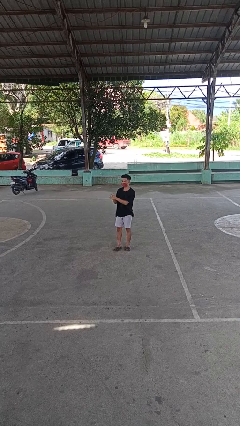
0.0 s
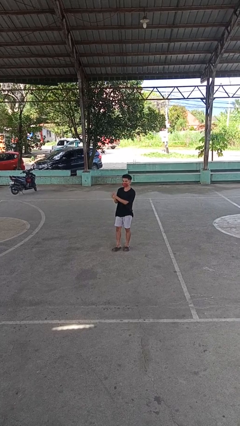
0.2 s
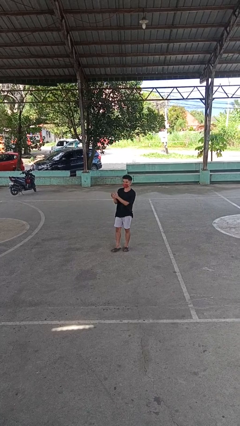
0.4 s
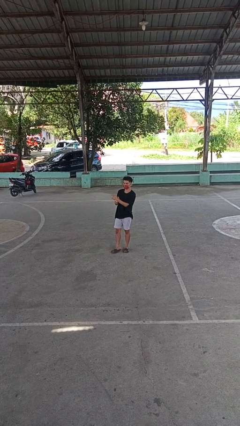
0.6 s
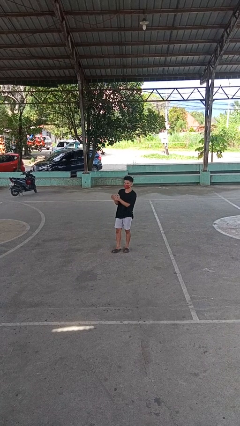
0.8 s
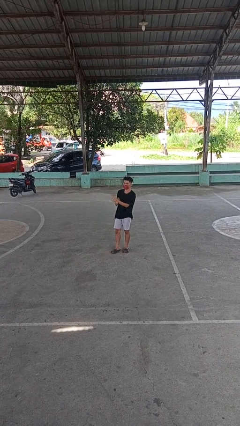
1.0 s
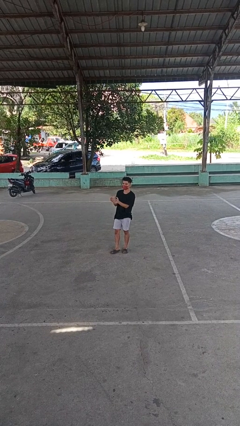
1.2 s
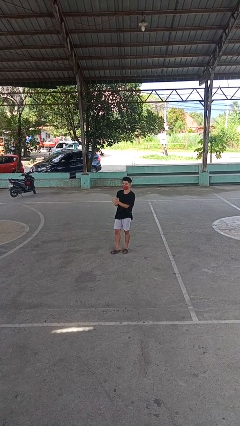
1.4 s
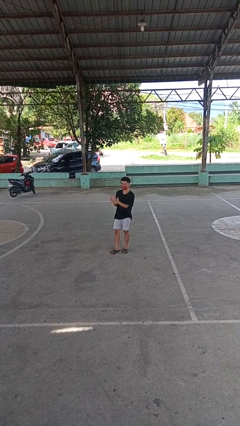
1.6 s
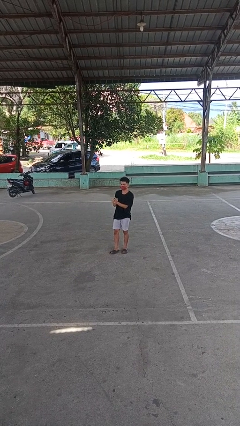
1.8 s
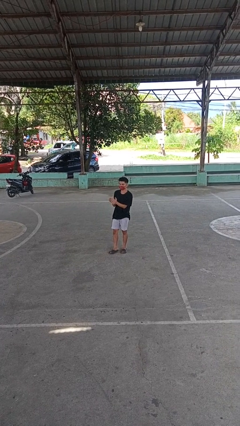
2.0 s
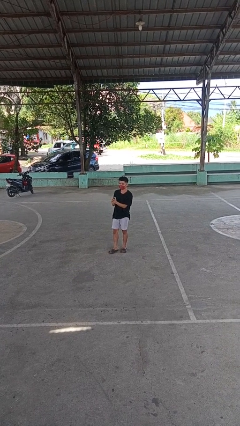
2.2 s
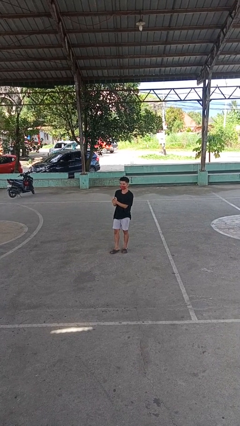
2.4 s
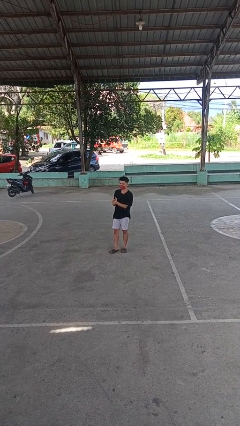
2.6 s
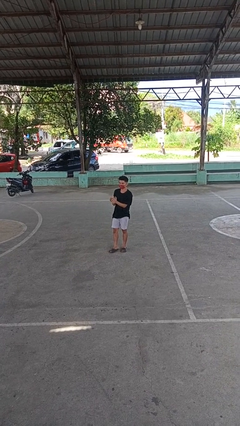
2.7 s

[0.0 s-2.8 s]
person claps hands

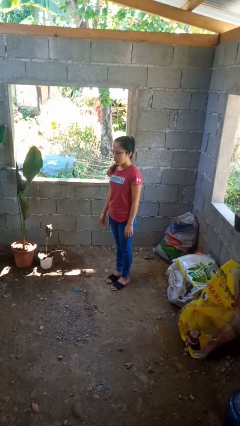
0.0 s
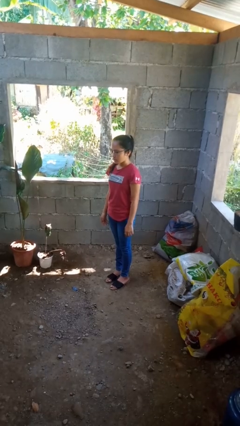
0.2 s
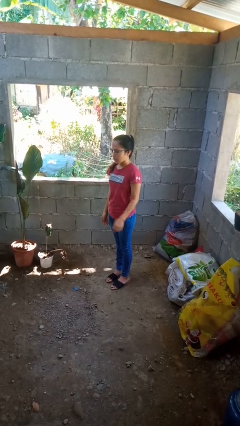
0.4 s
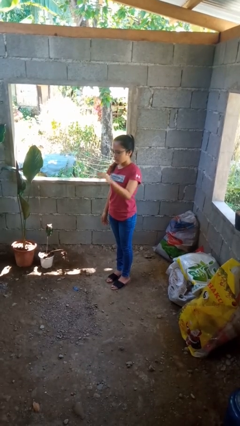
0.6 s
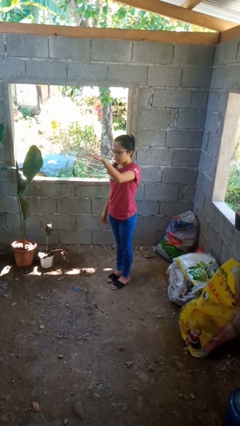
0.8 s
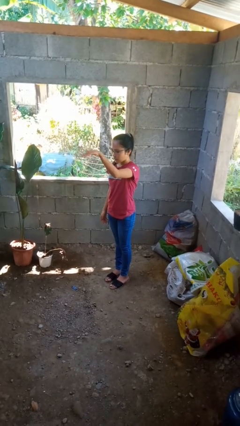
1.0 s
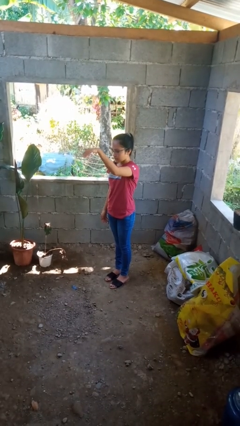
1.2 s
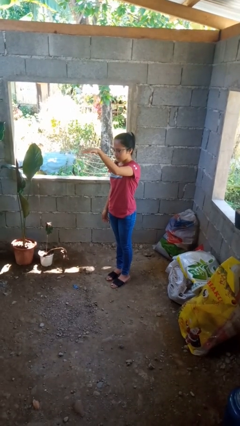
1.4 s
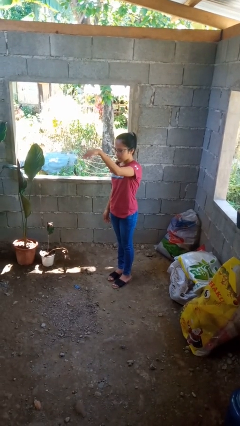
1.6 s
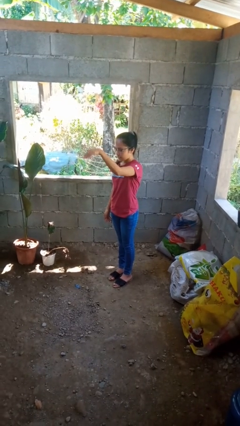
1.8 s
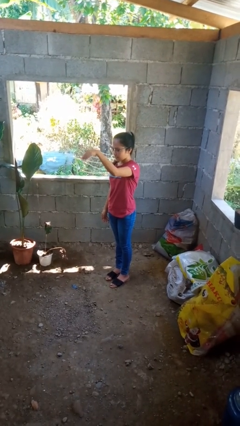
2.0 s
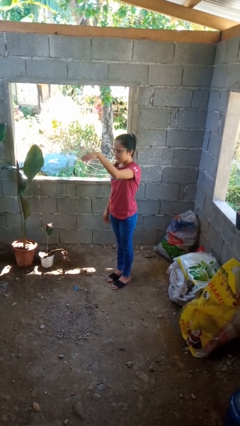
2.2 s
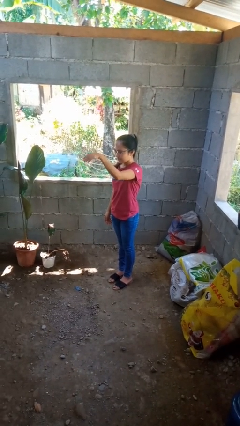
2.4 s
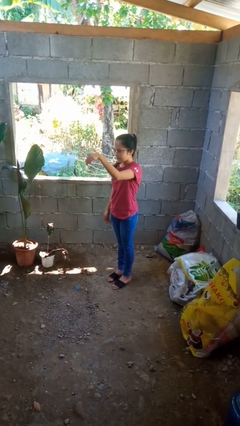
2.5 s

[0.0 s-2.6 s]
person gestures come here

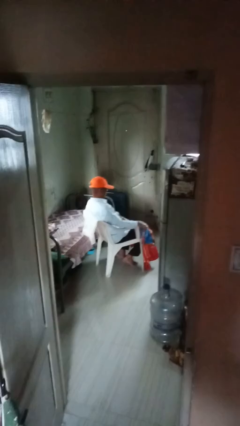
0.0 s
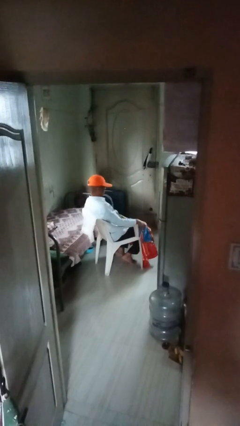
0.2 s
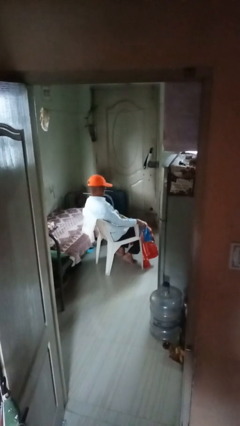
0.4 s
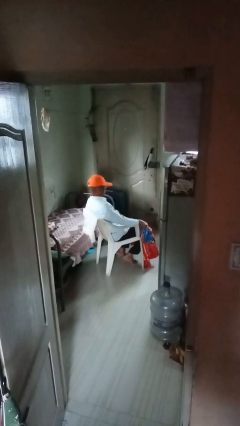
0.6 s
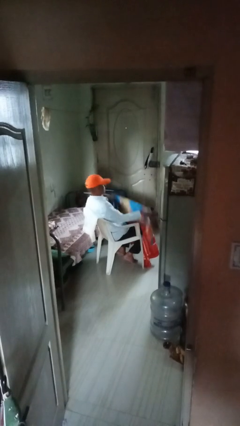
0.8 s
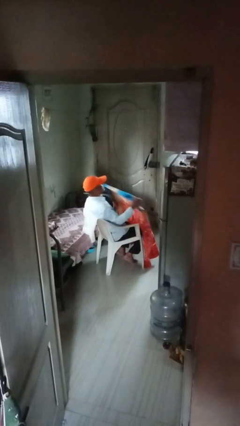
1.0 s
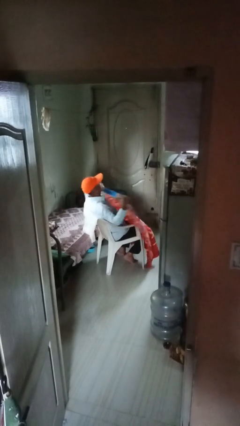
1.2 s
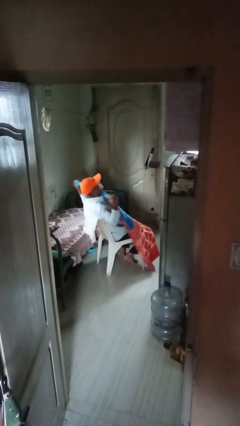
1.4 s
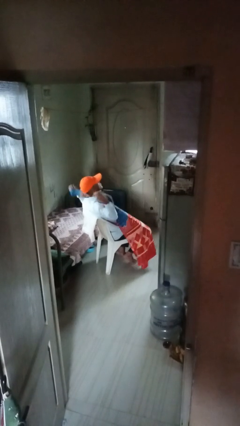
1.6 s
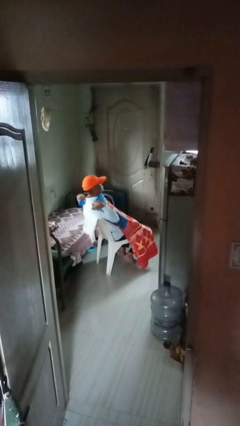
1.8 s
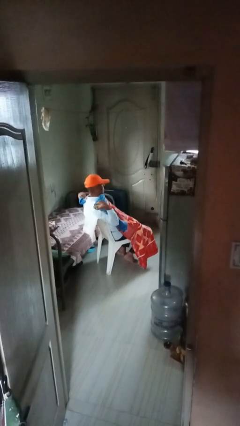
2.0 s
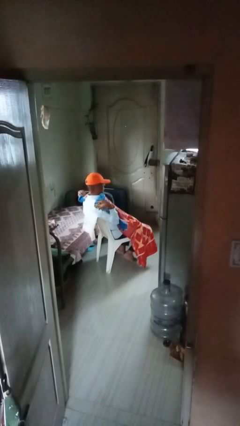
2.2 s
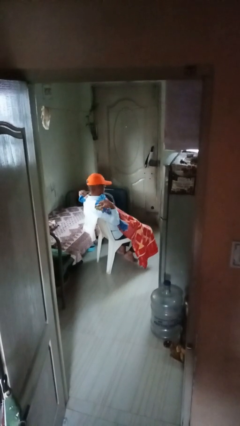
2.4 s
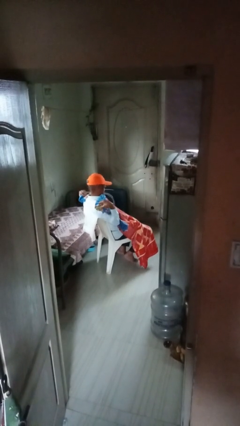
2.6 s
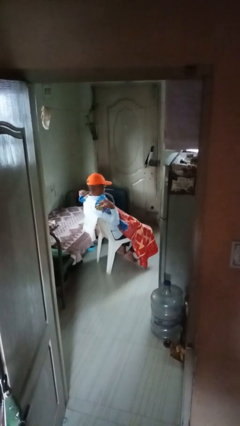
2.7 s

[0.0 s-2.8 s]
person covers with blanket

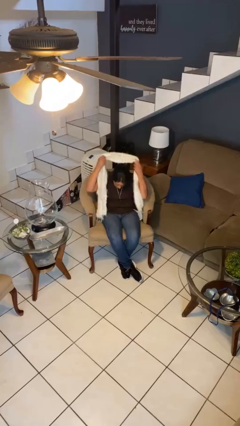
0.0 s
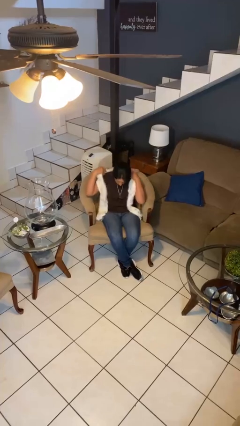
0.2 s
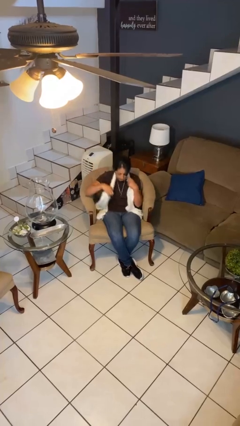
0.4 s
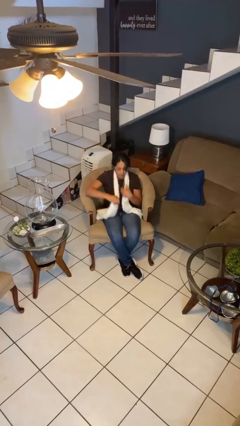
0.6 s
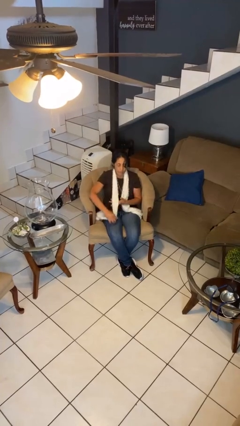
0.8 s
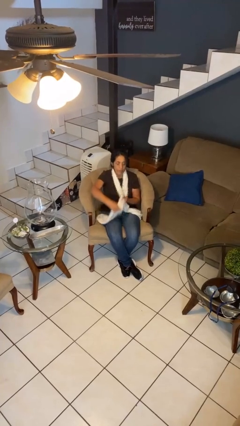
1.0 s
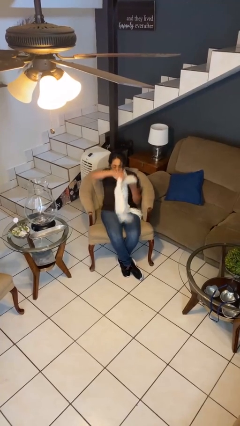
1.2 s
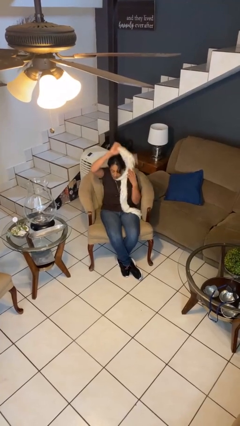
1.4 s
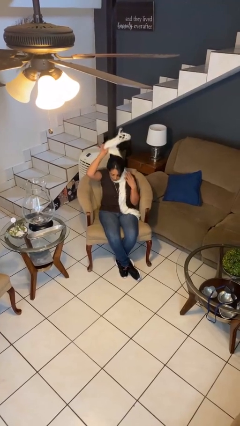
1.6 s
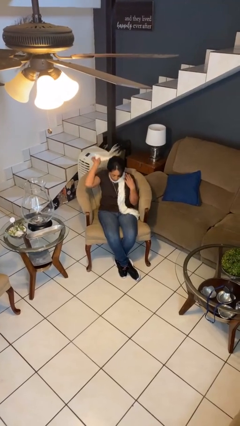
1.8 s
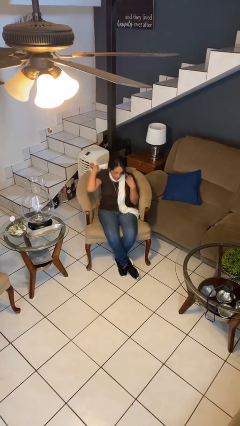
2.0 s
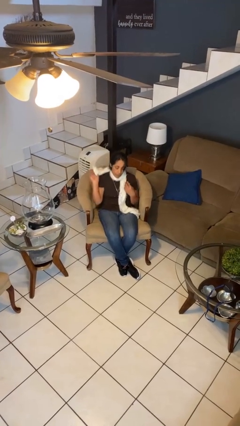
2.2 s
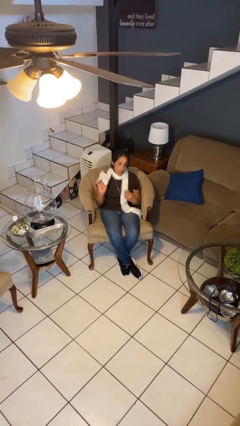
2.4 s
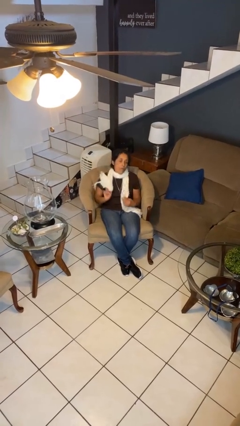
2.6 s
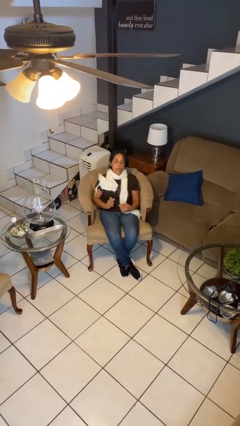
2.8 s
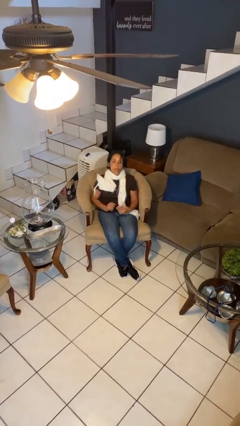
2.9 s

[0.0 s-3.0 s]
person puts on scarf

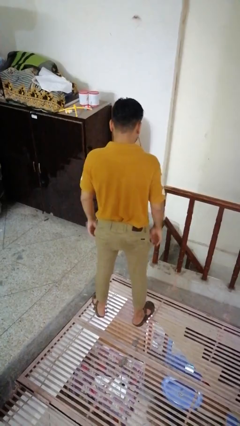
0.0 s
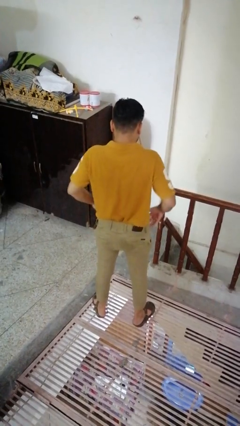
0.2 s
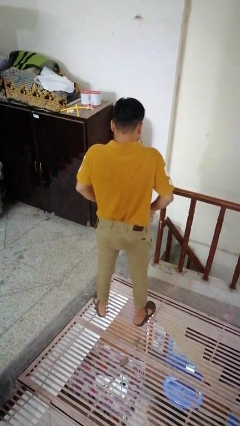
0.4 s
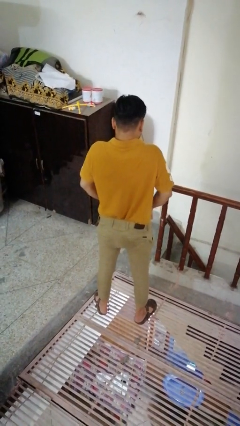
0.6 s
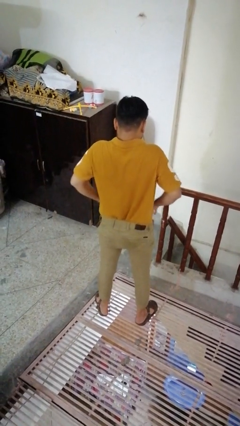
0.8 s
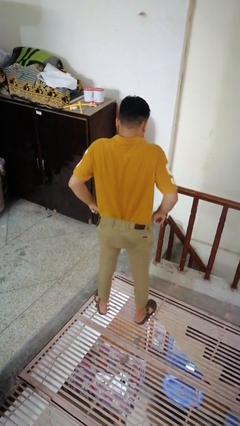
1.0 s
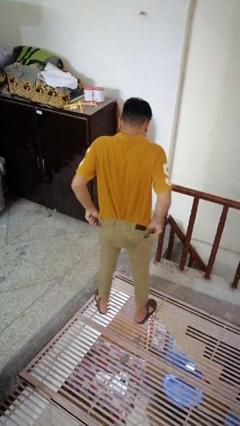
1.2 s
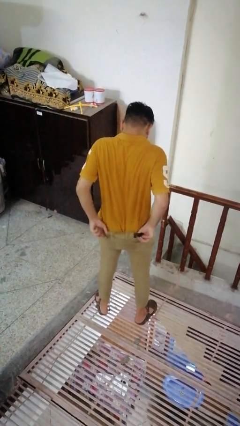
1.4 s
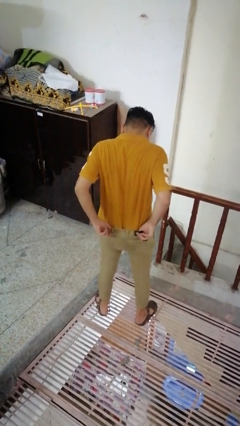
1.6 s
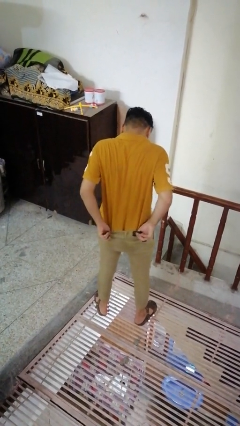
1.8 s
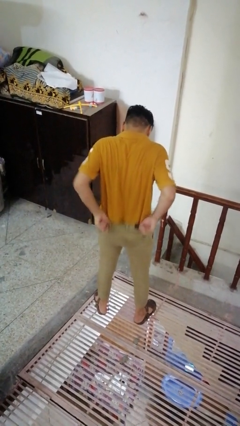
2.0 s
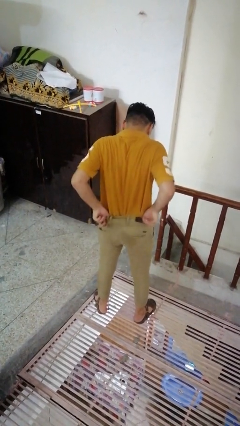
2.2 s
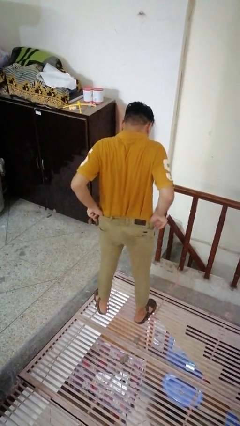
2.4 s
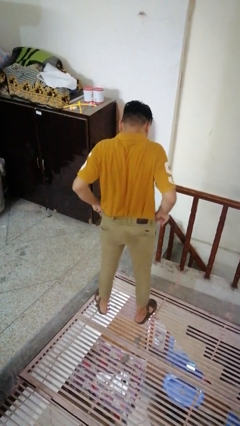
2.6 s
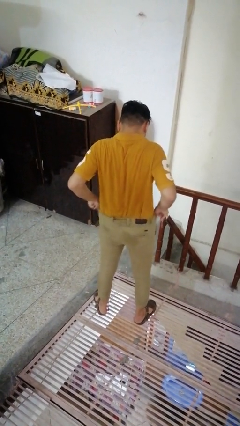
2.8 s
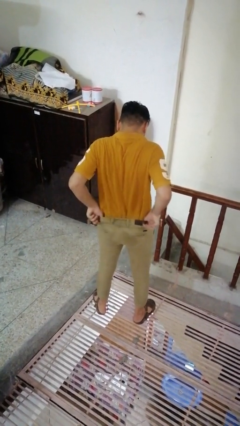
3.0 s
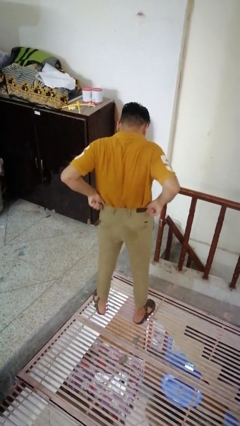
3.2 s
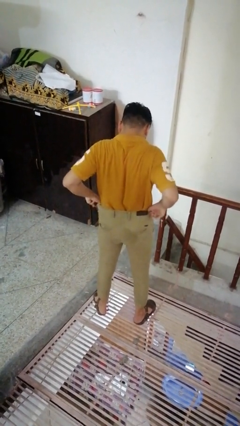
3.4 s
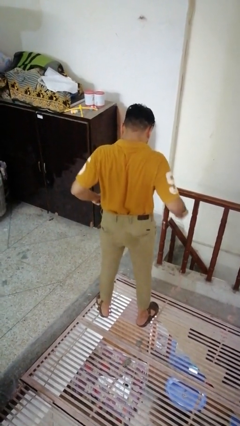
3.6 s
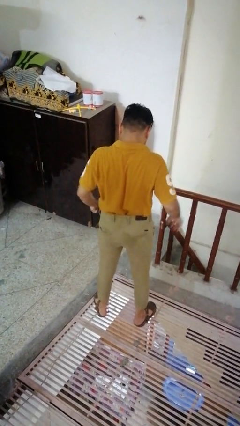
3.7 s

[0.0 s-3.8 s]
person hikes up pants

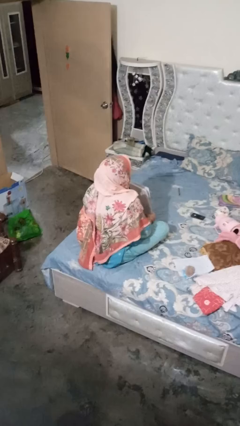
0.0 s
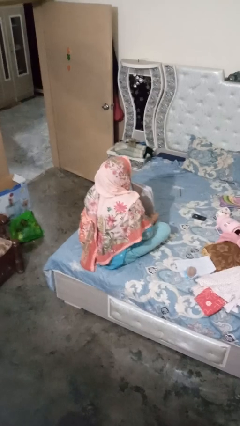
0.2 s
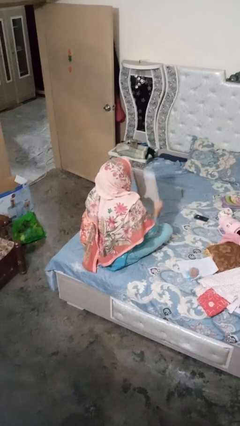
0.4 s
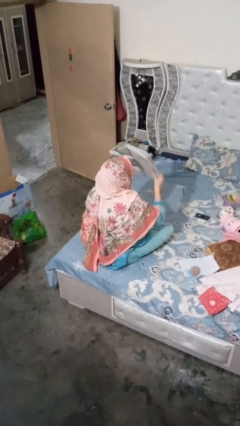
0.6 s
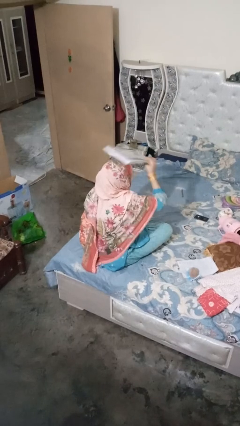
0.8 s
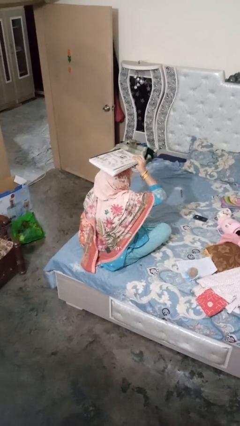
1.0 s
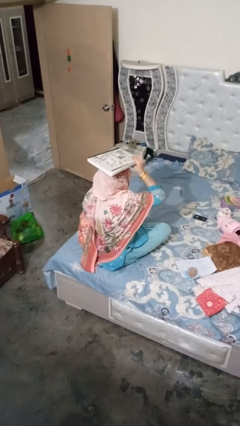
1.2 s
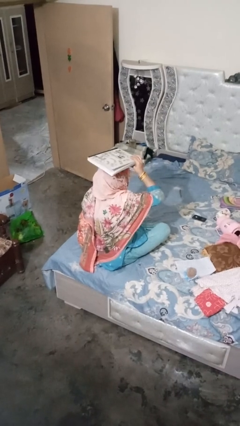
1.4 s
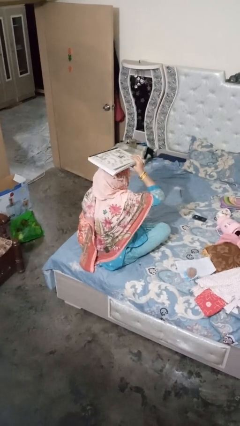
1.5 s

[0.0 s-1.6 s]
person holds object above head

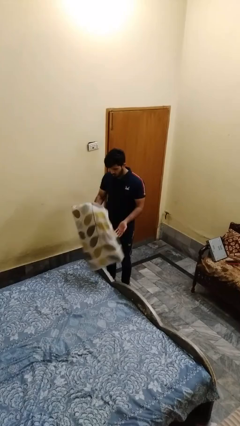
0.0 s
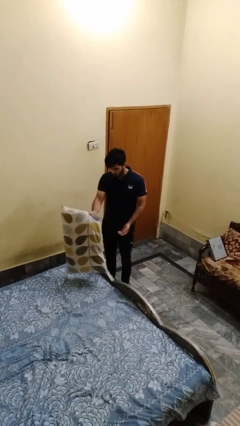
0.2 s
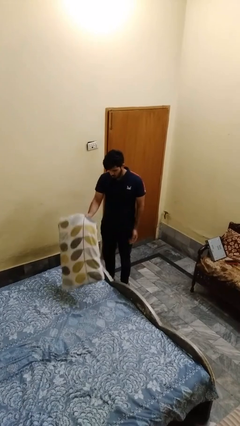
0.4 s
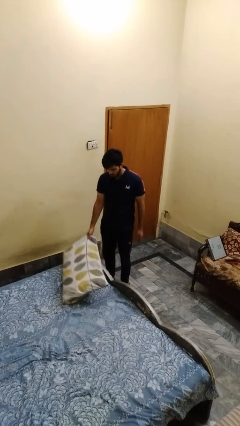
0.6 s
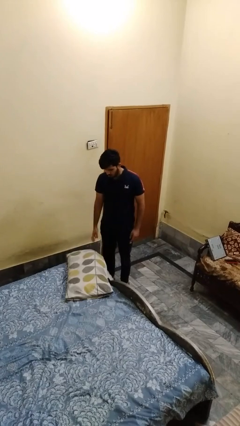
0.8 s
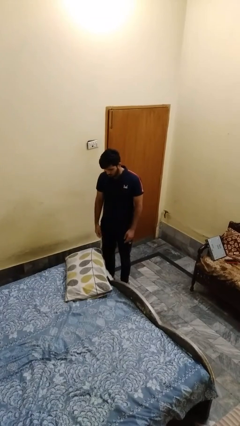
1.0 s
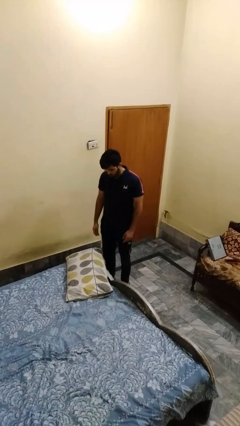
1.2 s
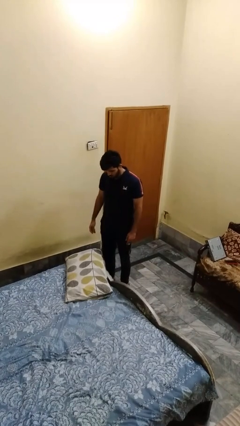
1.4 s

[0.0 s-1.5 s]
person puts down object on bed
